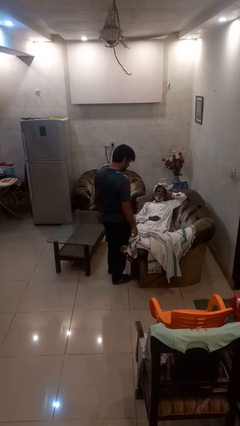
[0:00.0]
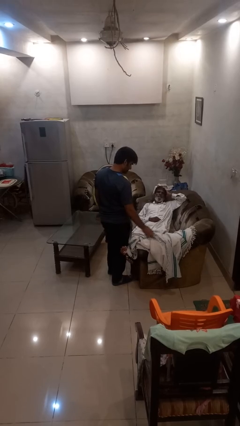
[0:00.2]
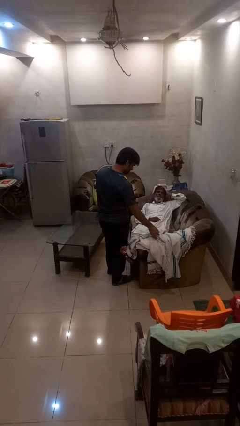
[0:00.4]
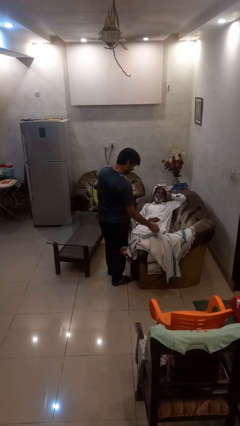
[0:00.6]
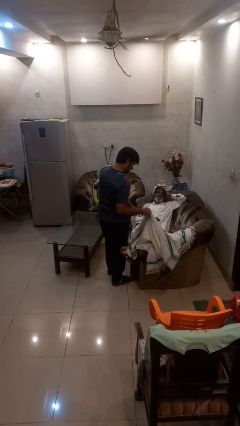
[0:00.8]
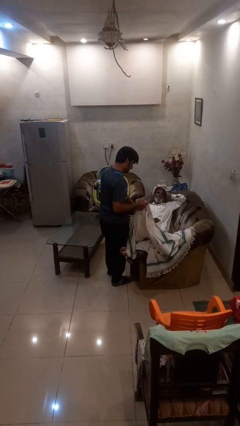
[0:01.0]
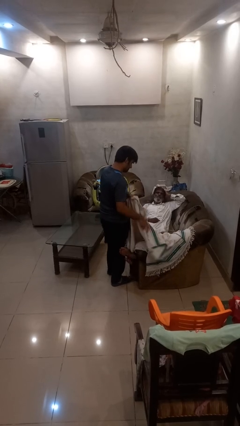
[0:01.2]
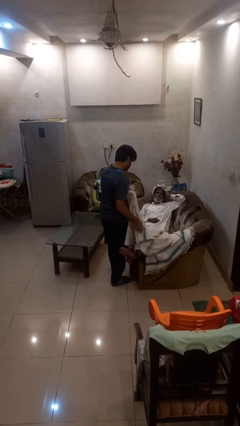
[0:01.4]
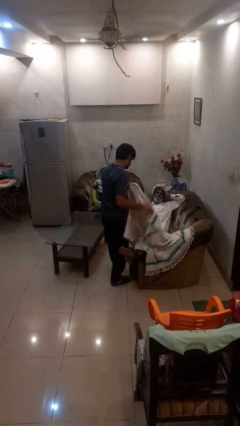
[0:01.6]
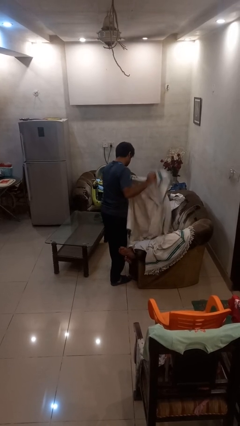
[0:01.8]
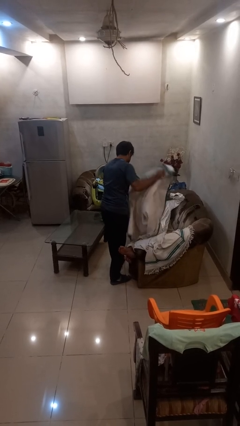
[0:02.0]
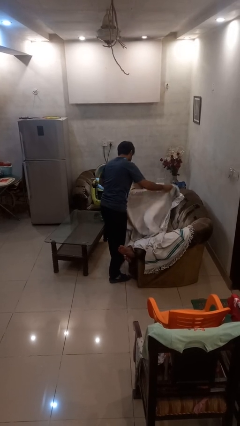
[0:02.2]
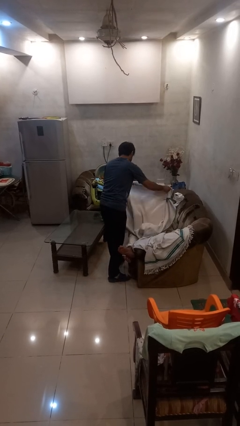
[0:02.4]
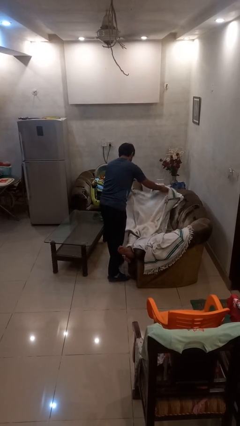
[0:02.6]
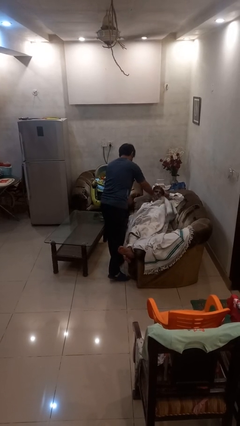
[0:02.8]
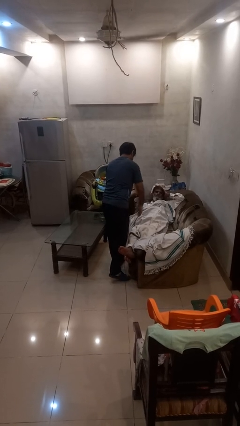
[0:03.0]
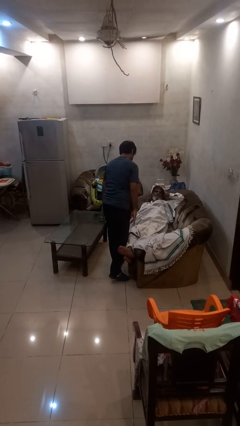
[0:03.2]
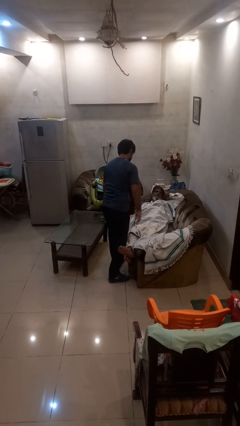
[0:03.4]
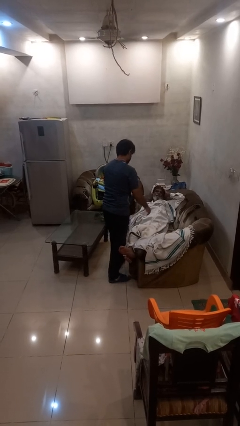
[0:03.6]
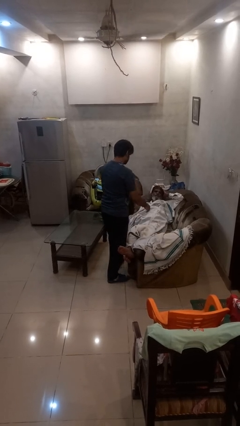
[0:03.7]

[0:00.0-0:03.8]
person covers friend with blanket

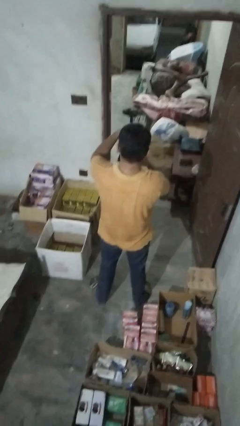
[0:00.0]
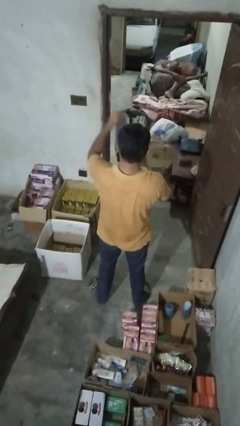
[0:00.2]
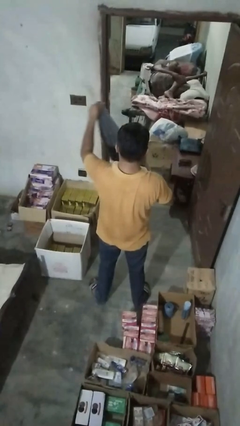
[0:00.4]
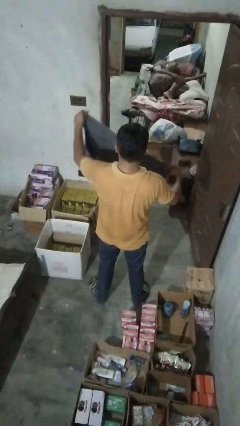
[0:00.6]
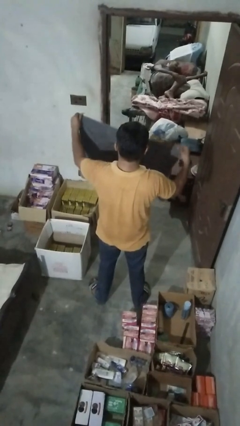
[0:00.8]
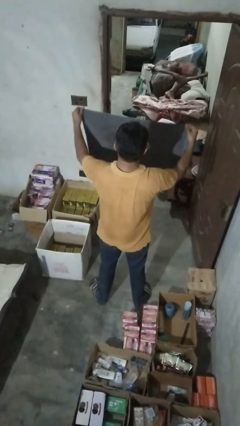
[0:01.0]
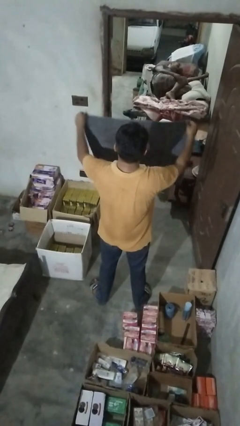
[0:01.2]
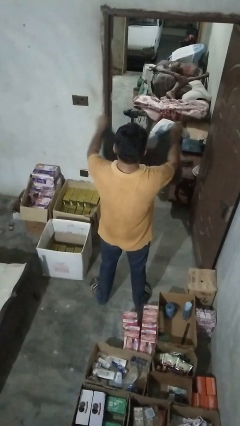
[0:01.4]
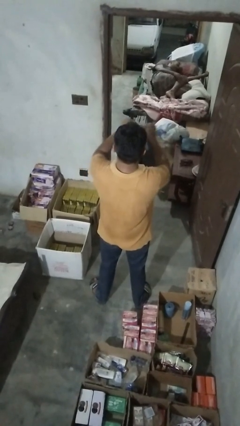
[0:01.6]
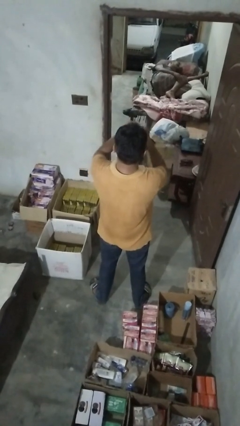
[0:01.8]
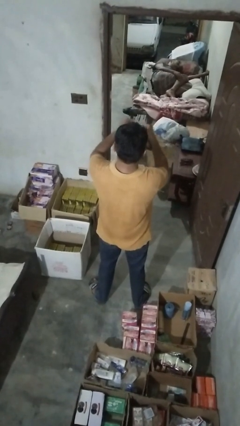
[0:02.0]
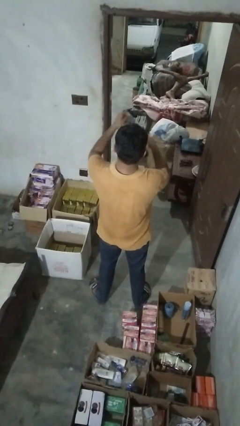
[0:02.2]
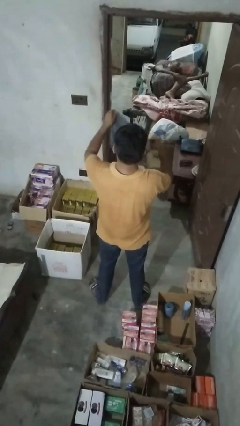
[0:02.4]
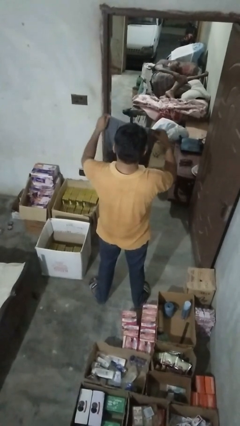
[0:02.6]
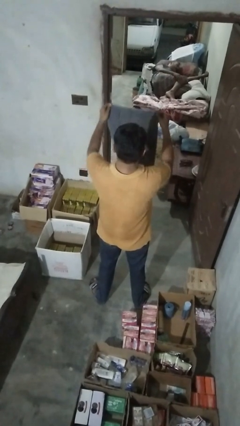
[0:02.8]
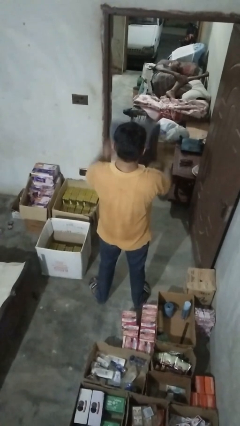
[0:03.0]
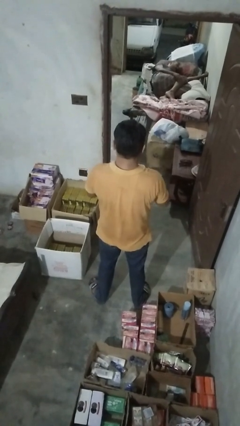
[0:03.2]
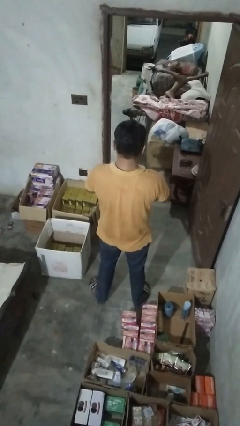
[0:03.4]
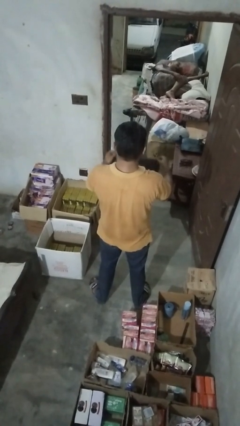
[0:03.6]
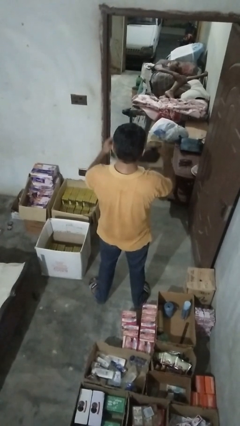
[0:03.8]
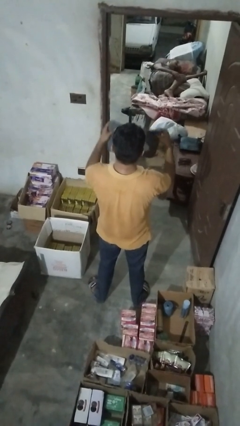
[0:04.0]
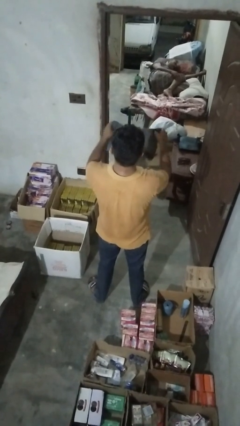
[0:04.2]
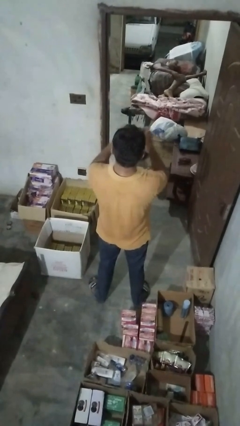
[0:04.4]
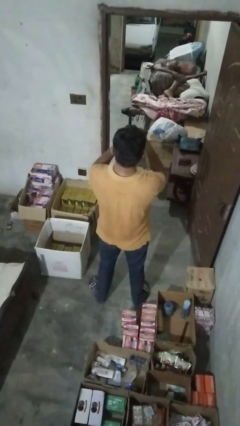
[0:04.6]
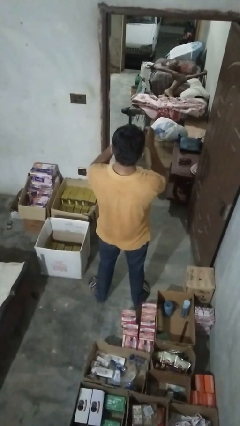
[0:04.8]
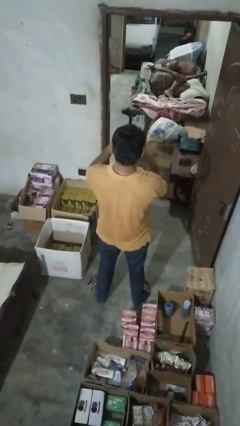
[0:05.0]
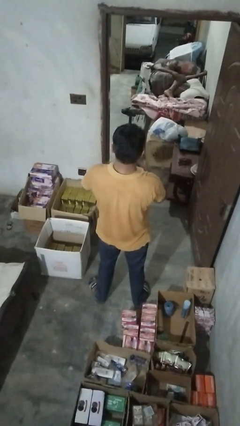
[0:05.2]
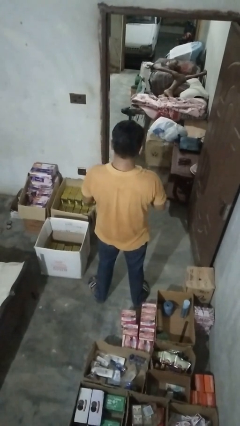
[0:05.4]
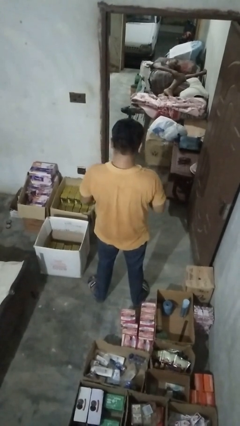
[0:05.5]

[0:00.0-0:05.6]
person folds towel

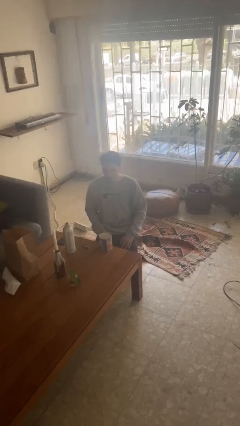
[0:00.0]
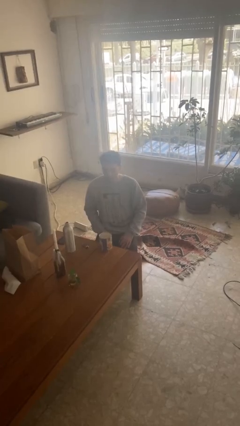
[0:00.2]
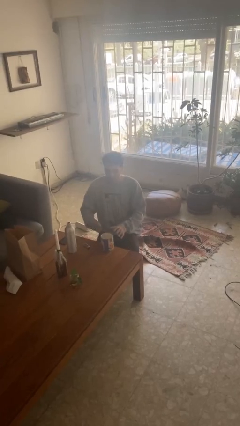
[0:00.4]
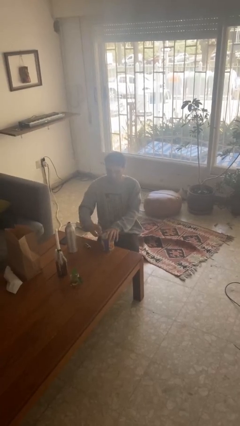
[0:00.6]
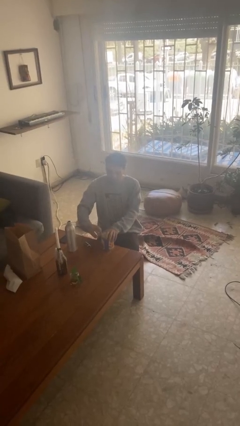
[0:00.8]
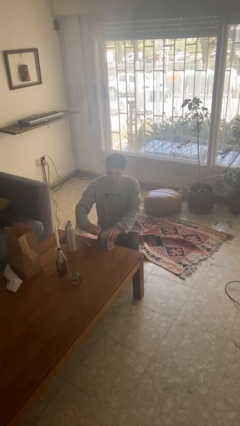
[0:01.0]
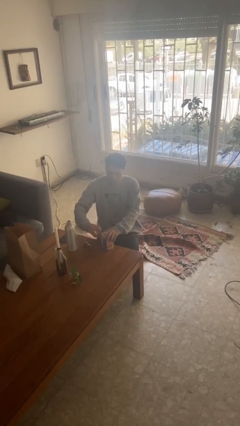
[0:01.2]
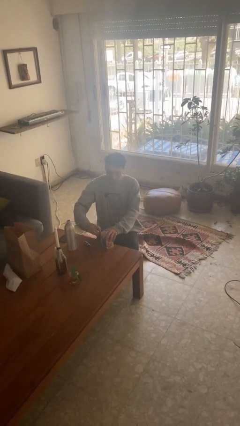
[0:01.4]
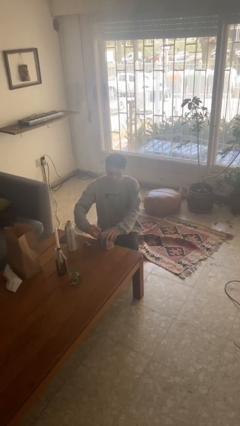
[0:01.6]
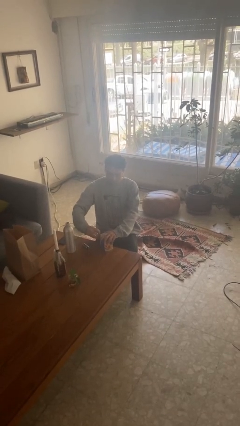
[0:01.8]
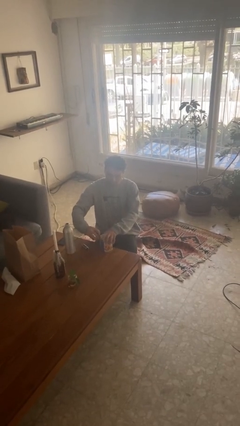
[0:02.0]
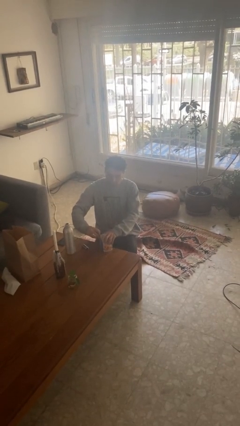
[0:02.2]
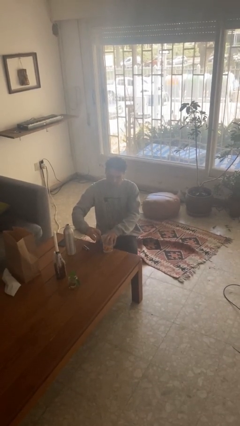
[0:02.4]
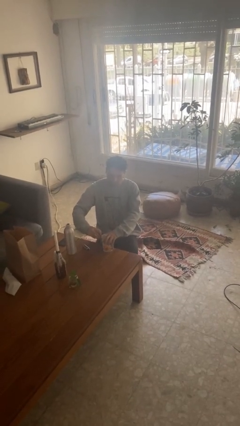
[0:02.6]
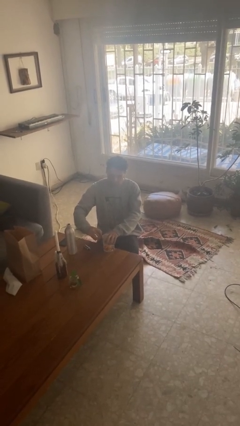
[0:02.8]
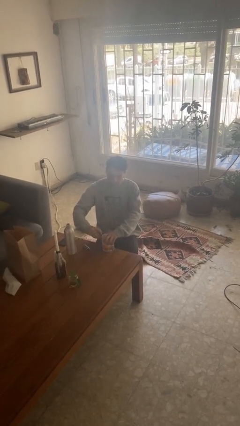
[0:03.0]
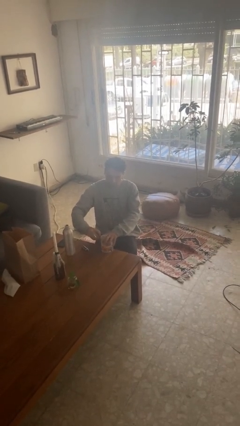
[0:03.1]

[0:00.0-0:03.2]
person opens can with can opener

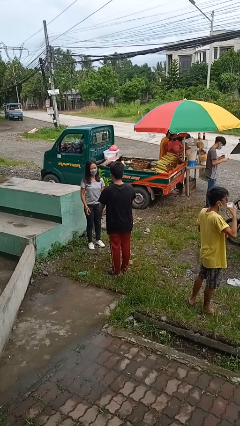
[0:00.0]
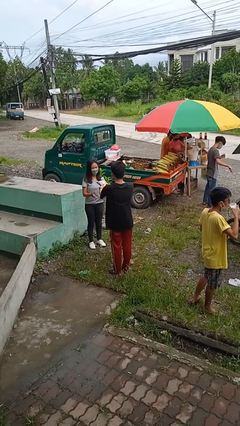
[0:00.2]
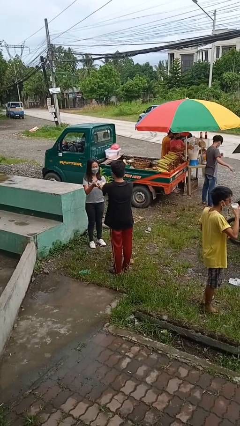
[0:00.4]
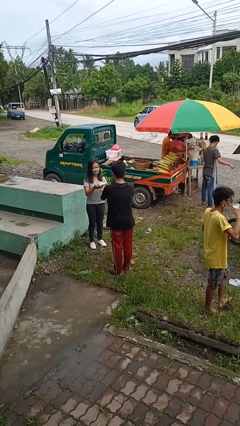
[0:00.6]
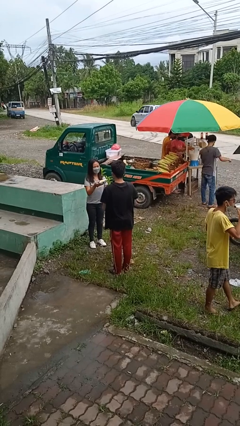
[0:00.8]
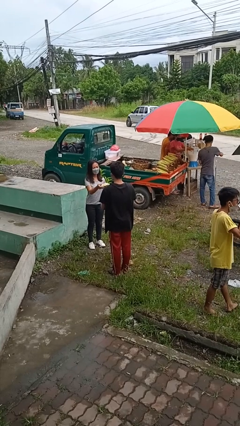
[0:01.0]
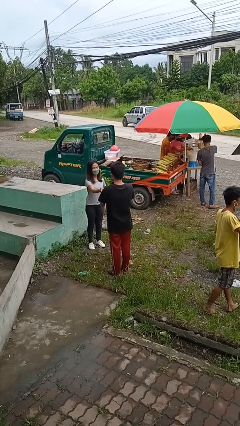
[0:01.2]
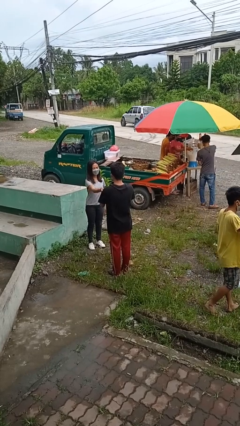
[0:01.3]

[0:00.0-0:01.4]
person transfers object to person

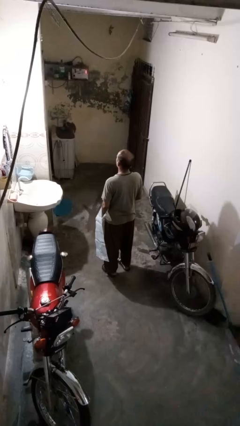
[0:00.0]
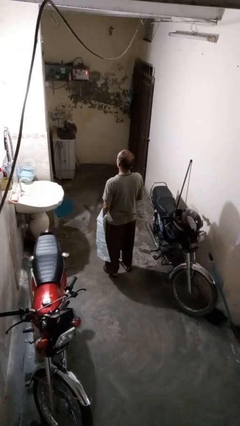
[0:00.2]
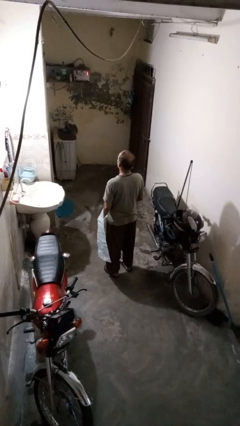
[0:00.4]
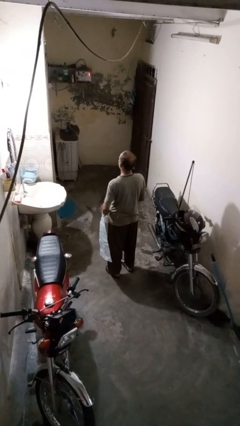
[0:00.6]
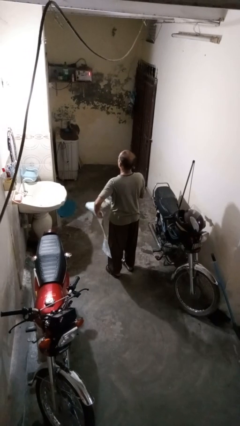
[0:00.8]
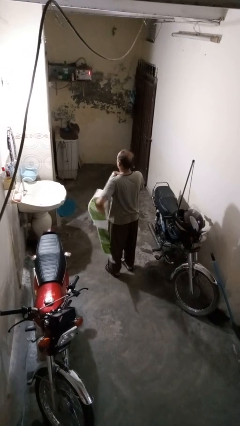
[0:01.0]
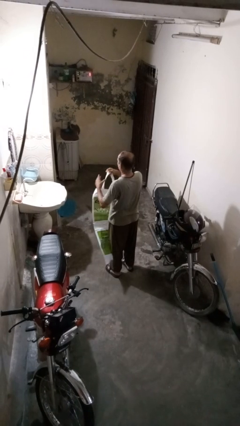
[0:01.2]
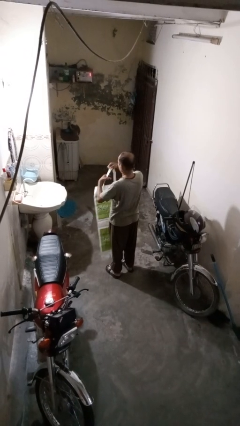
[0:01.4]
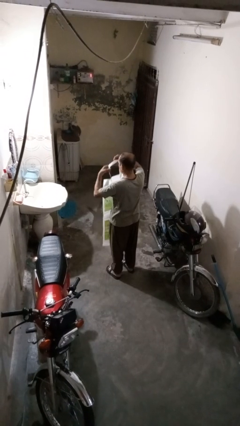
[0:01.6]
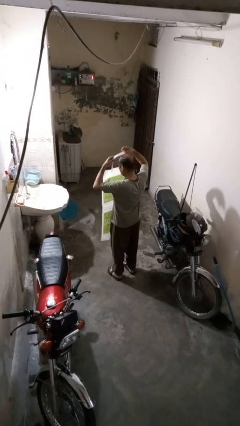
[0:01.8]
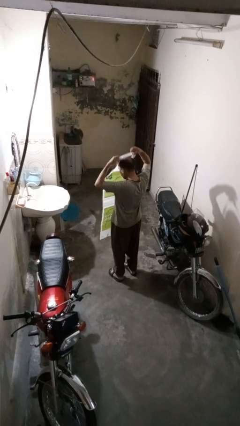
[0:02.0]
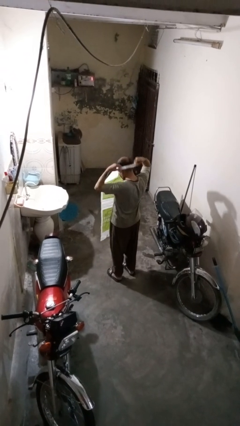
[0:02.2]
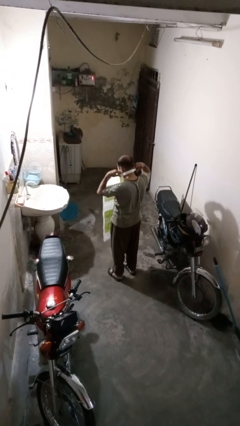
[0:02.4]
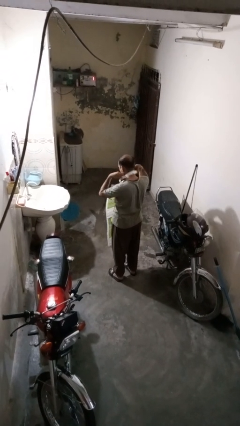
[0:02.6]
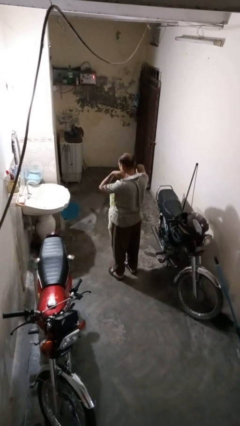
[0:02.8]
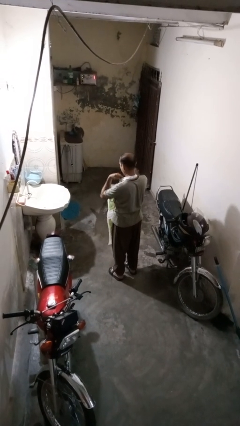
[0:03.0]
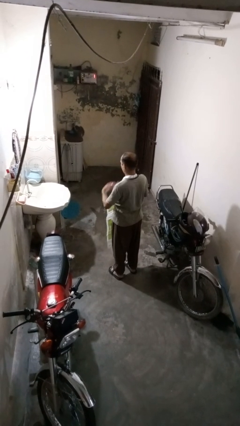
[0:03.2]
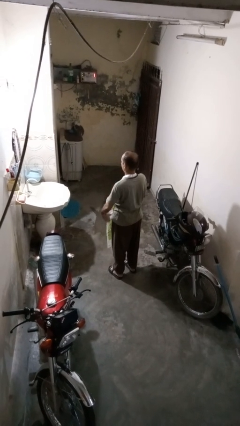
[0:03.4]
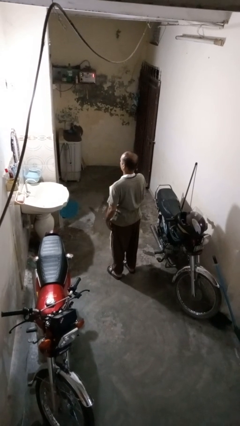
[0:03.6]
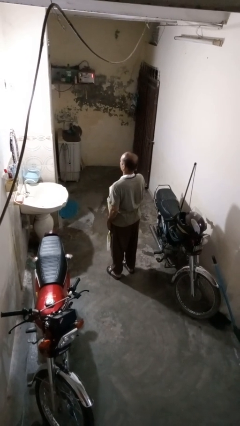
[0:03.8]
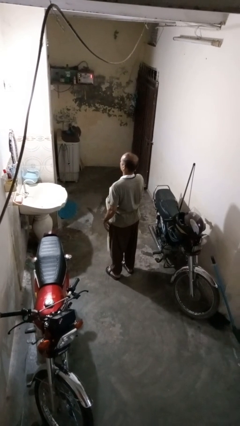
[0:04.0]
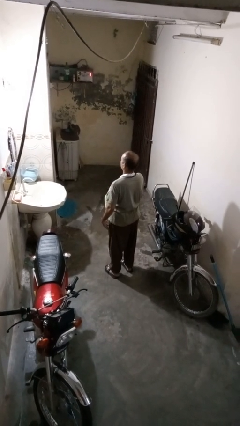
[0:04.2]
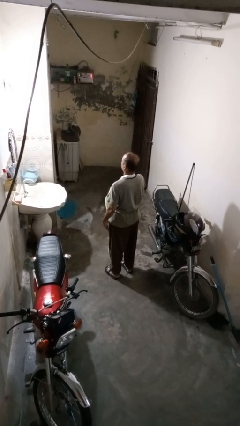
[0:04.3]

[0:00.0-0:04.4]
person puts on apron
